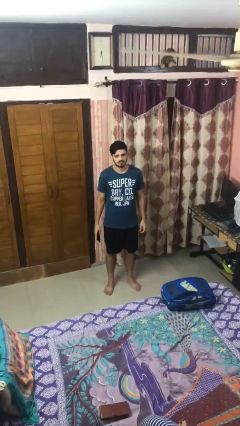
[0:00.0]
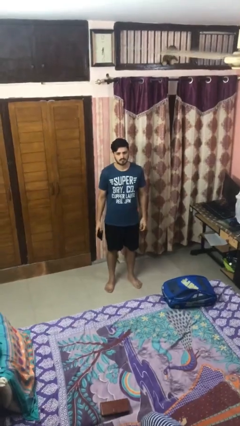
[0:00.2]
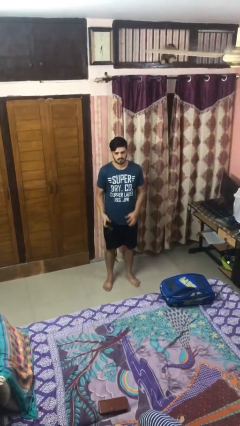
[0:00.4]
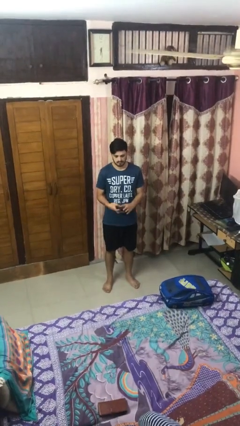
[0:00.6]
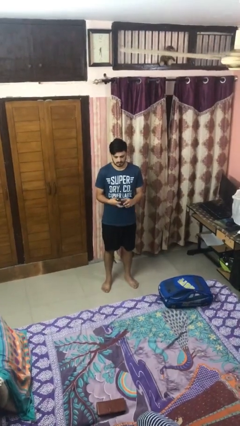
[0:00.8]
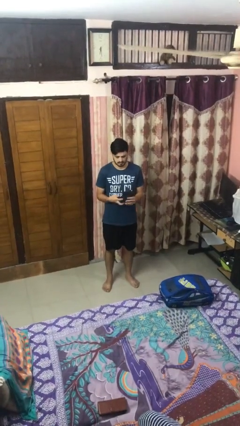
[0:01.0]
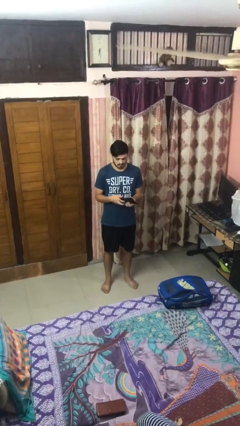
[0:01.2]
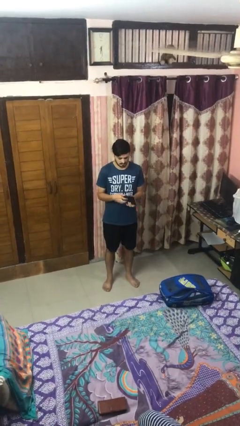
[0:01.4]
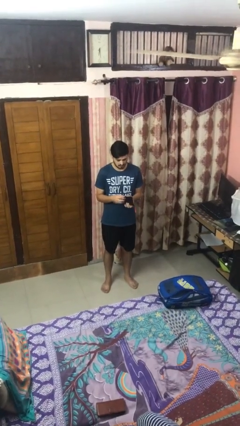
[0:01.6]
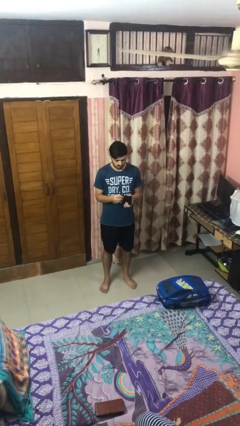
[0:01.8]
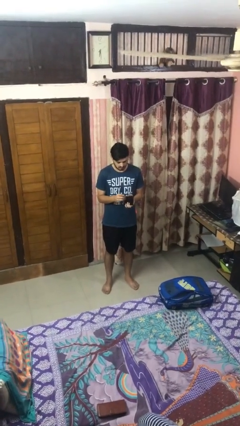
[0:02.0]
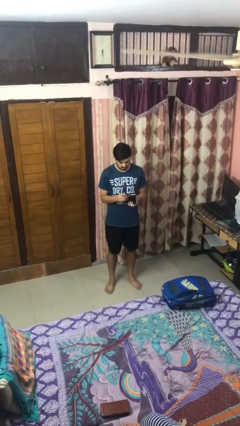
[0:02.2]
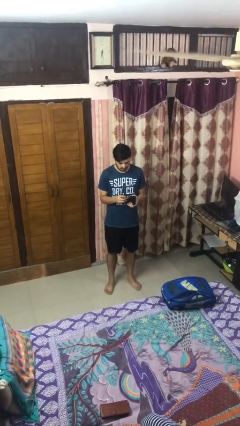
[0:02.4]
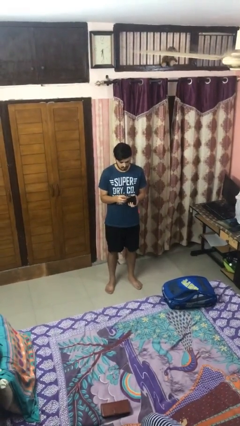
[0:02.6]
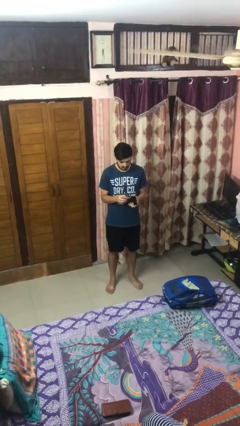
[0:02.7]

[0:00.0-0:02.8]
person searches in purse

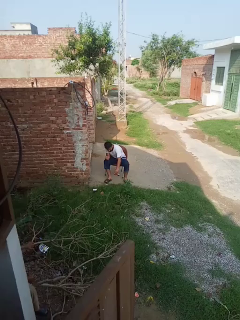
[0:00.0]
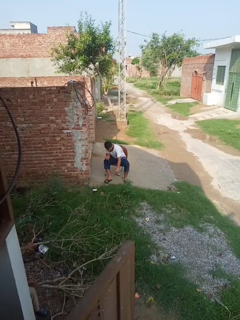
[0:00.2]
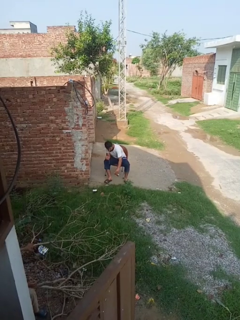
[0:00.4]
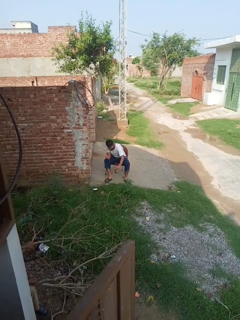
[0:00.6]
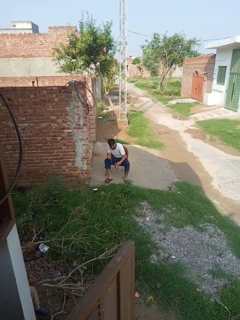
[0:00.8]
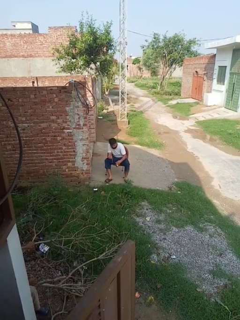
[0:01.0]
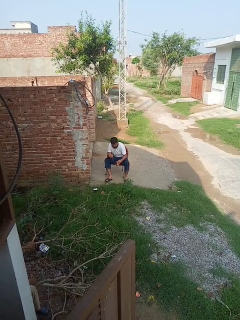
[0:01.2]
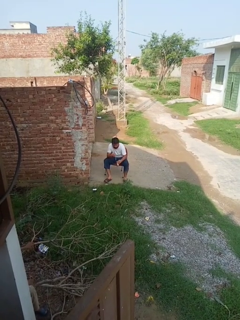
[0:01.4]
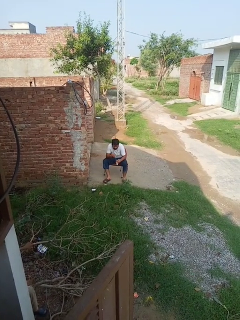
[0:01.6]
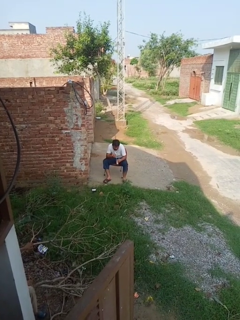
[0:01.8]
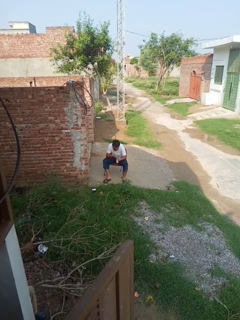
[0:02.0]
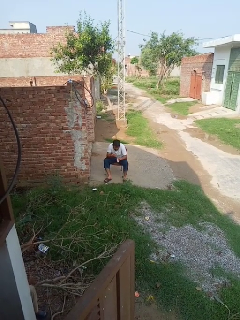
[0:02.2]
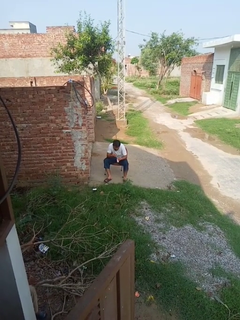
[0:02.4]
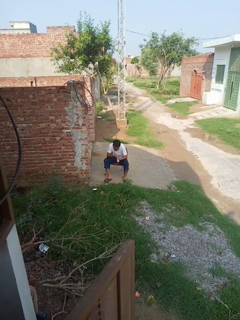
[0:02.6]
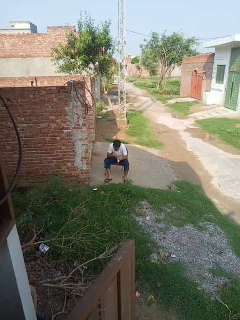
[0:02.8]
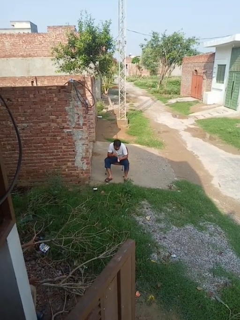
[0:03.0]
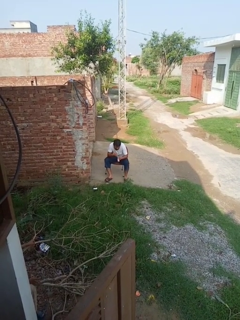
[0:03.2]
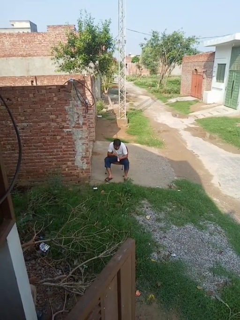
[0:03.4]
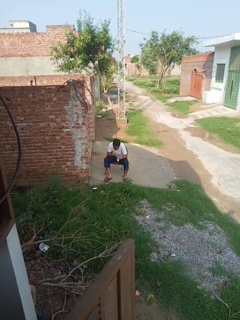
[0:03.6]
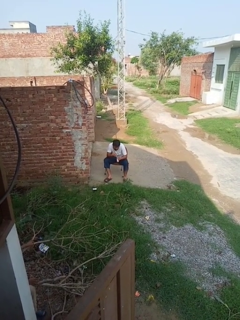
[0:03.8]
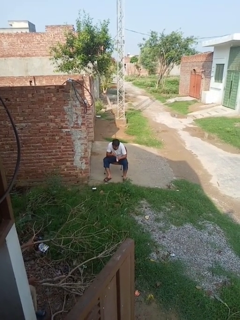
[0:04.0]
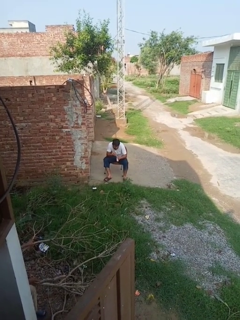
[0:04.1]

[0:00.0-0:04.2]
person drinks from straw

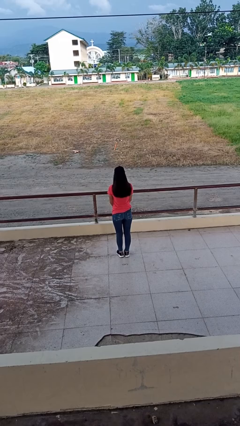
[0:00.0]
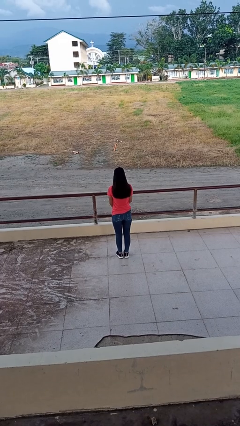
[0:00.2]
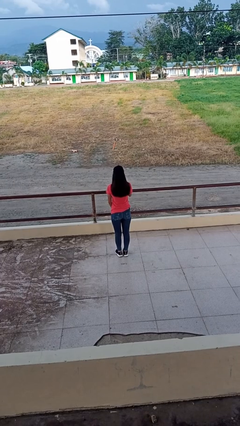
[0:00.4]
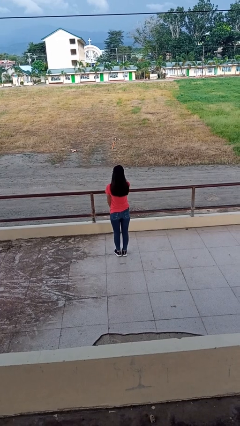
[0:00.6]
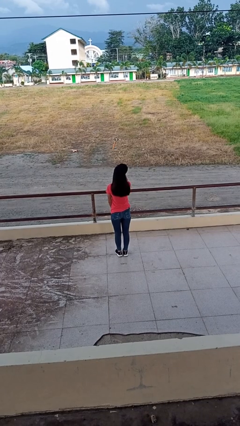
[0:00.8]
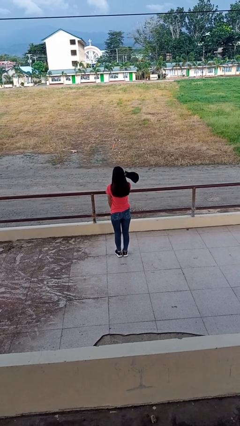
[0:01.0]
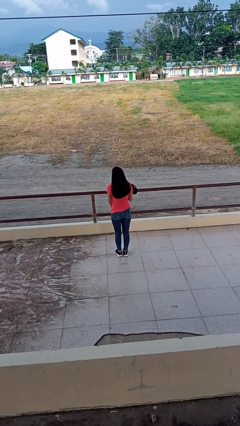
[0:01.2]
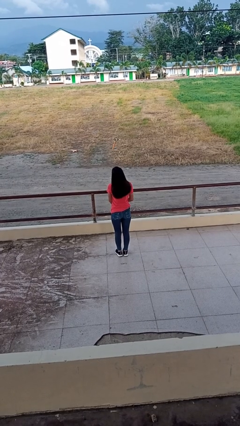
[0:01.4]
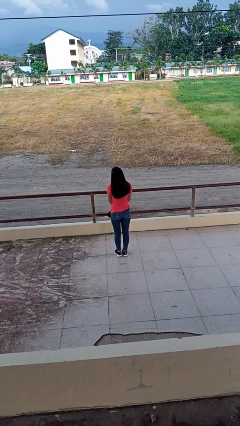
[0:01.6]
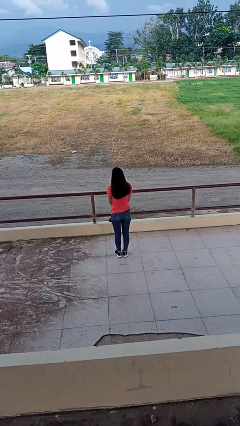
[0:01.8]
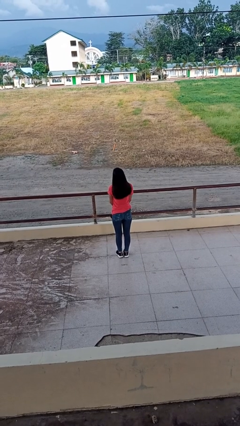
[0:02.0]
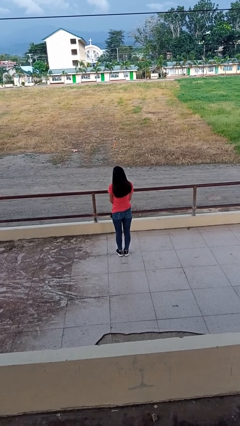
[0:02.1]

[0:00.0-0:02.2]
person takes off hat

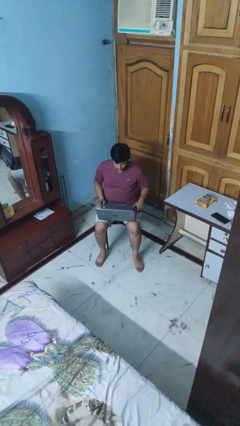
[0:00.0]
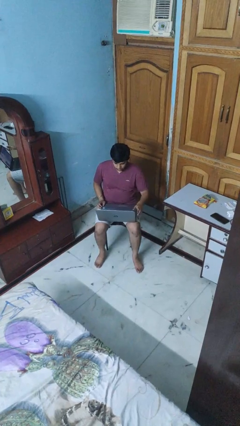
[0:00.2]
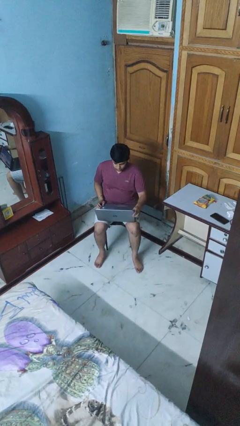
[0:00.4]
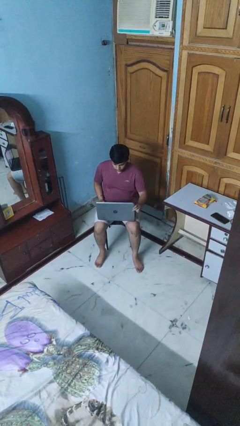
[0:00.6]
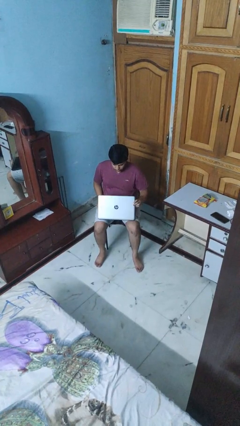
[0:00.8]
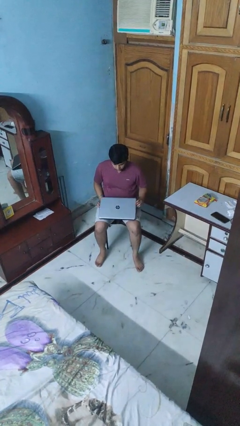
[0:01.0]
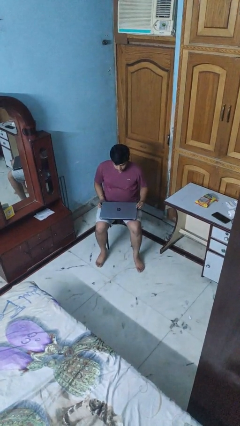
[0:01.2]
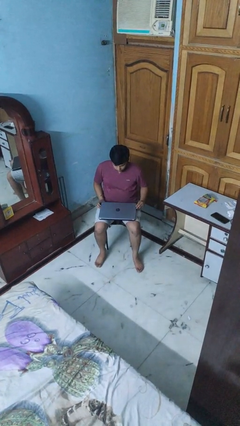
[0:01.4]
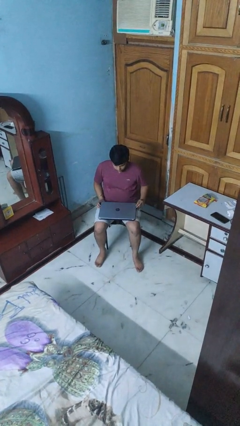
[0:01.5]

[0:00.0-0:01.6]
person closes laptop

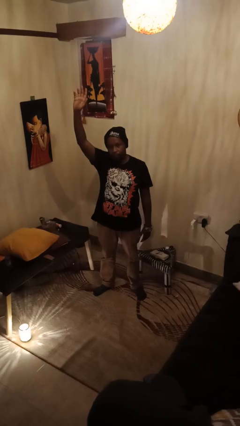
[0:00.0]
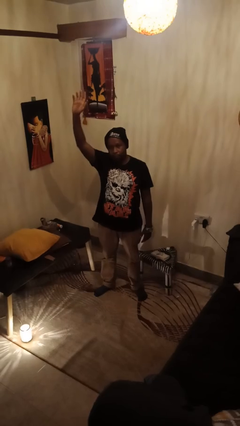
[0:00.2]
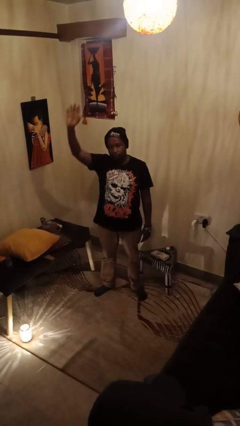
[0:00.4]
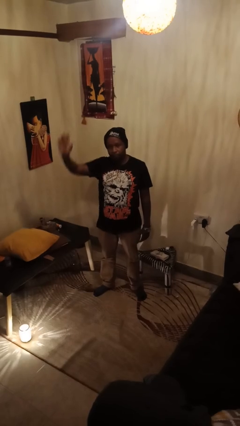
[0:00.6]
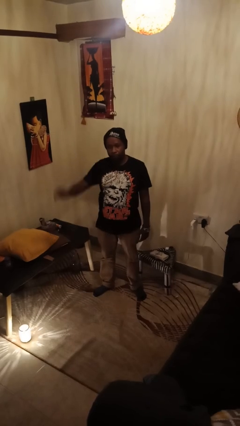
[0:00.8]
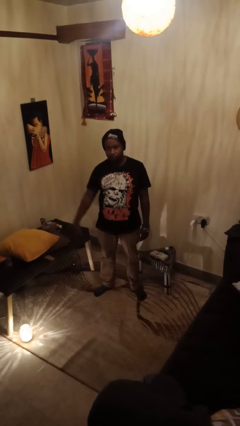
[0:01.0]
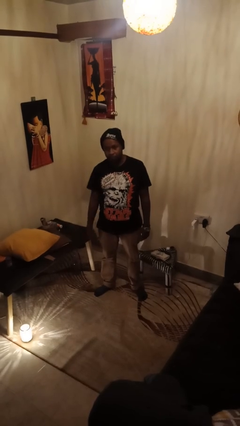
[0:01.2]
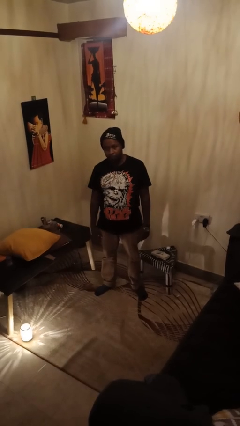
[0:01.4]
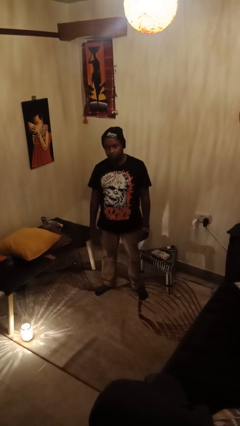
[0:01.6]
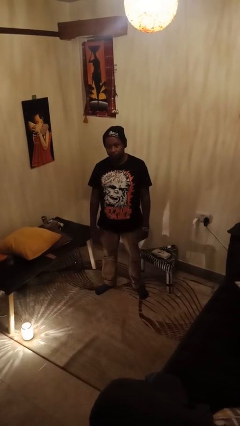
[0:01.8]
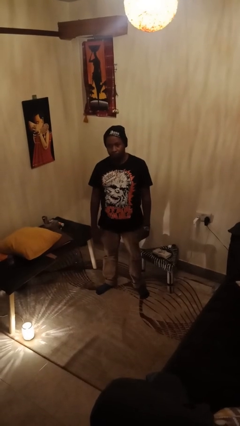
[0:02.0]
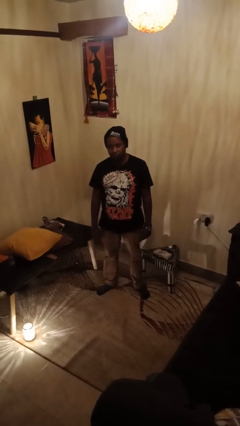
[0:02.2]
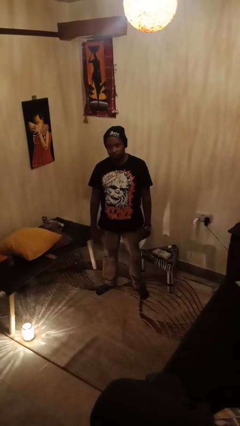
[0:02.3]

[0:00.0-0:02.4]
person gestures lower hand

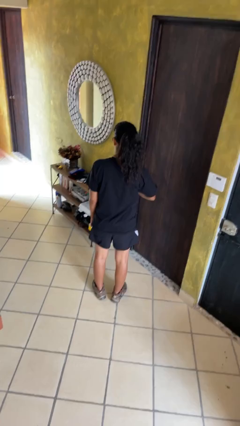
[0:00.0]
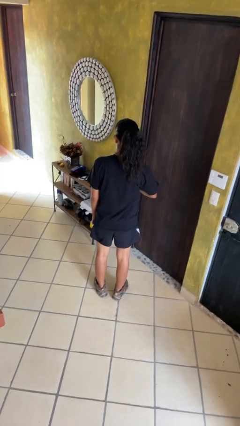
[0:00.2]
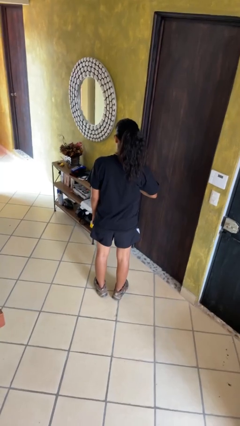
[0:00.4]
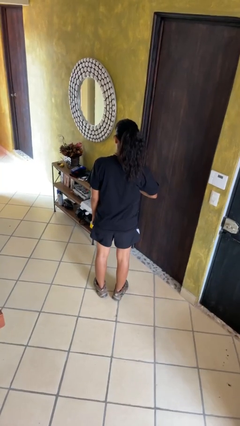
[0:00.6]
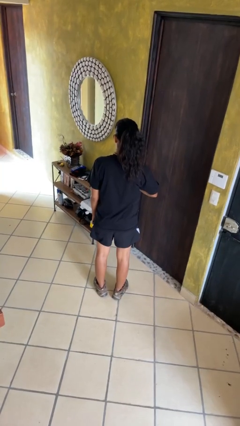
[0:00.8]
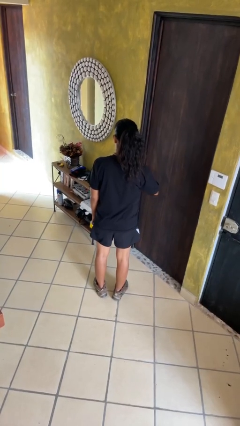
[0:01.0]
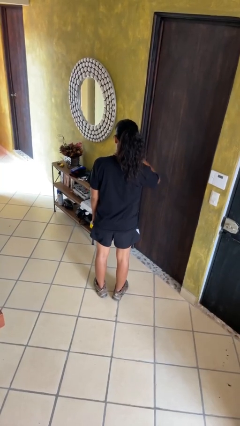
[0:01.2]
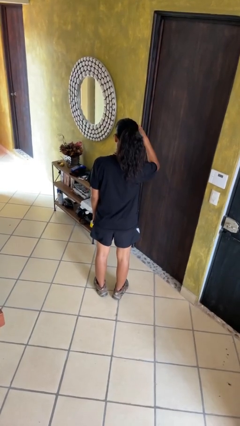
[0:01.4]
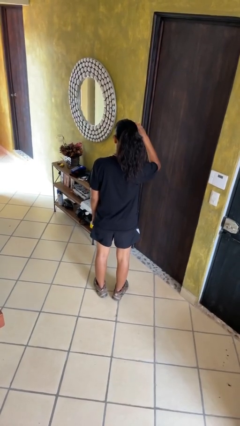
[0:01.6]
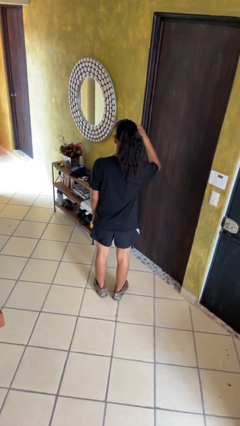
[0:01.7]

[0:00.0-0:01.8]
person gestures swipe up

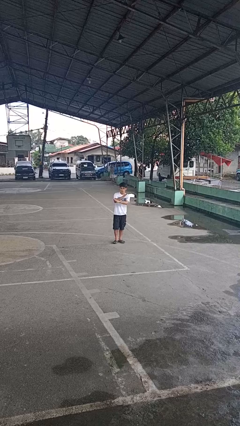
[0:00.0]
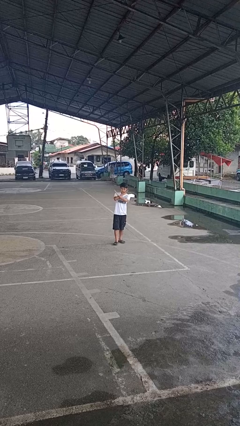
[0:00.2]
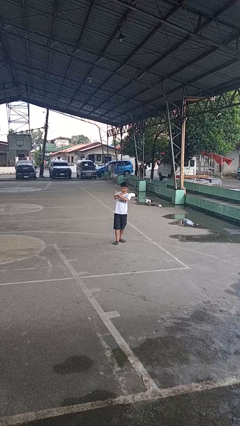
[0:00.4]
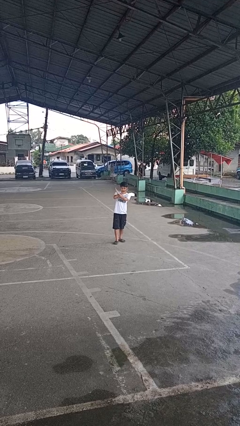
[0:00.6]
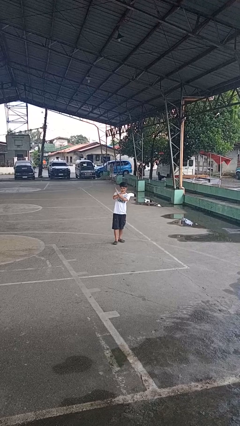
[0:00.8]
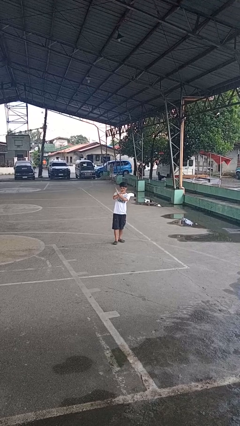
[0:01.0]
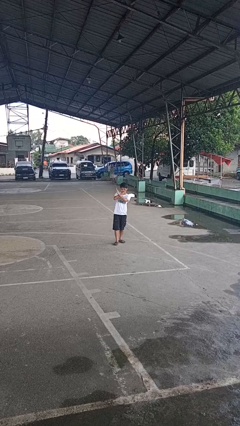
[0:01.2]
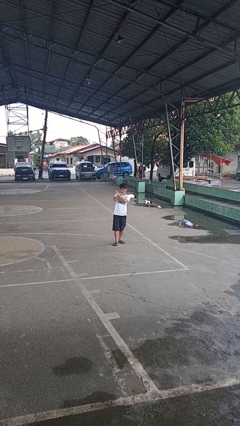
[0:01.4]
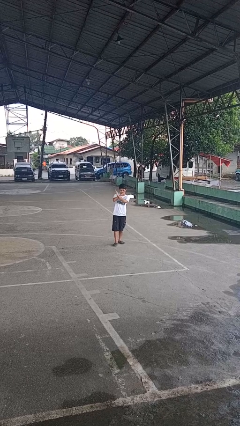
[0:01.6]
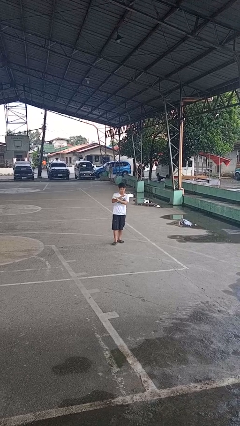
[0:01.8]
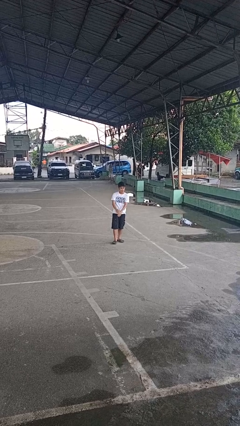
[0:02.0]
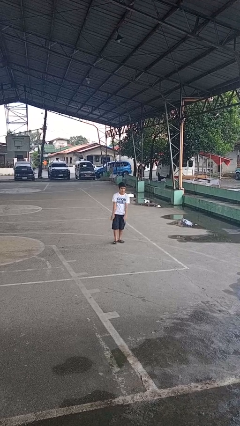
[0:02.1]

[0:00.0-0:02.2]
person gestures arms x

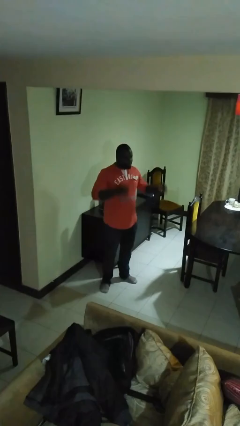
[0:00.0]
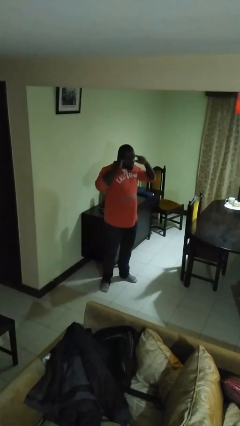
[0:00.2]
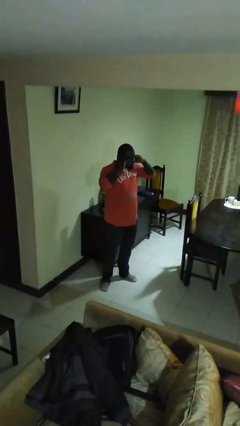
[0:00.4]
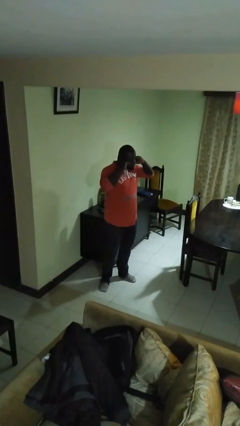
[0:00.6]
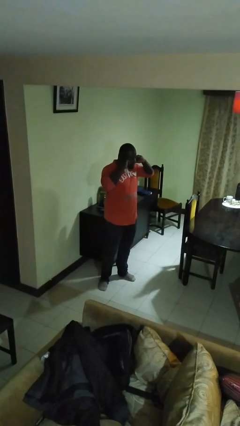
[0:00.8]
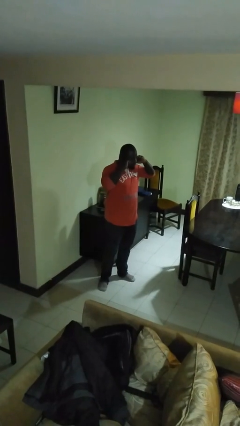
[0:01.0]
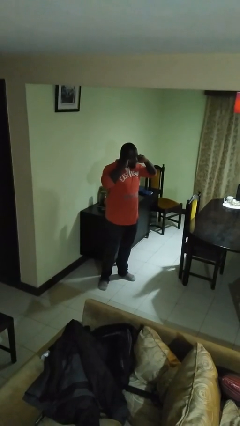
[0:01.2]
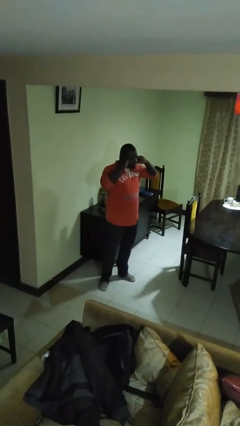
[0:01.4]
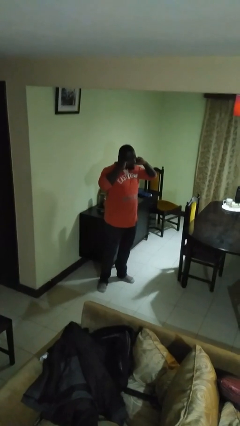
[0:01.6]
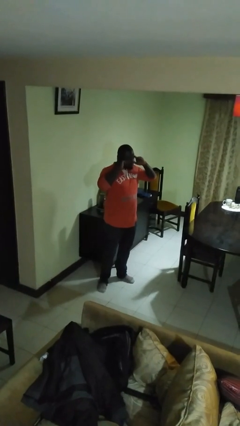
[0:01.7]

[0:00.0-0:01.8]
person puts fingers in ear
